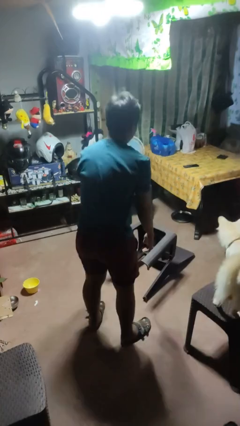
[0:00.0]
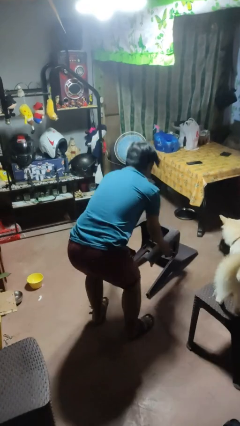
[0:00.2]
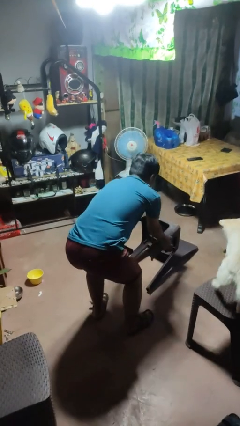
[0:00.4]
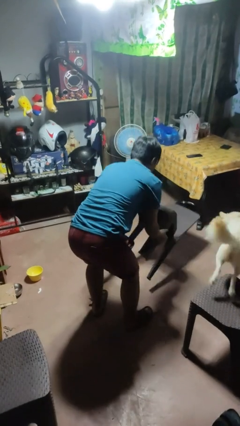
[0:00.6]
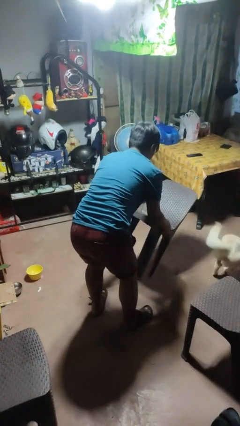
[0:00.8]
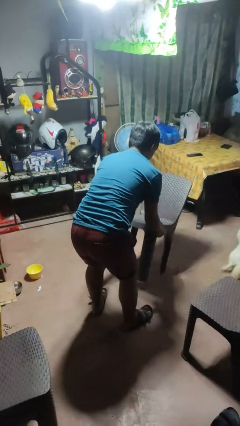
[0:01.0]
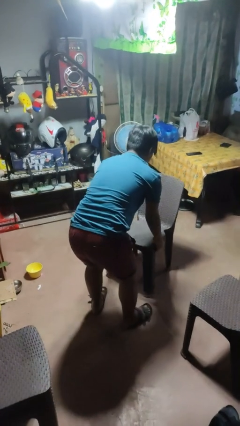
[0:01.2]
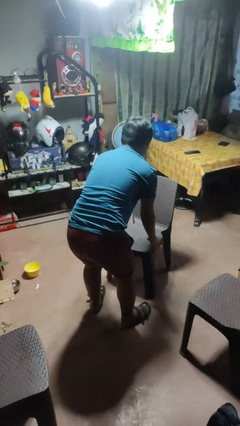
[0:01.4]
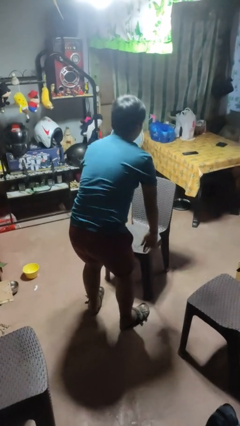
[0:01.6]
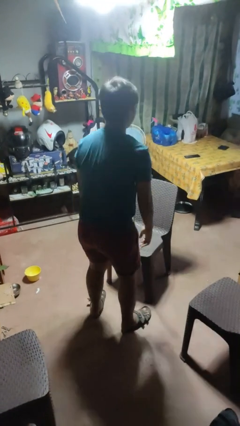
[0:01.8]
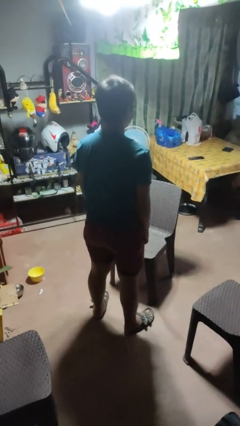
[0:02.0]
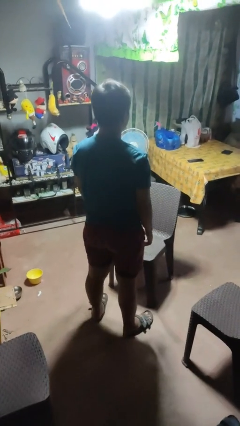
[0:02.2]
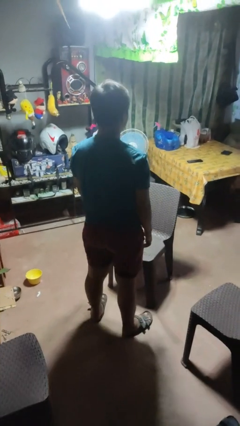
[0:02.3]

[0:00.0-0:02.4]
person sets upright furniture

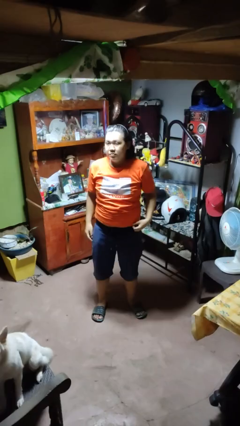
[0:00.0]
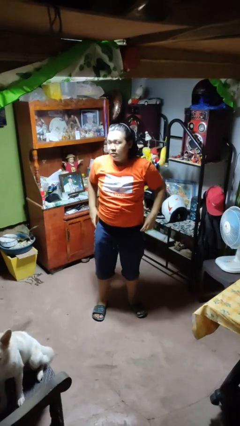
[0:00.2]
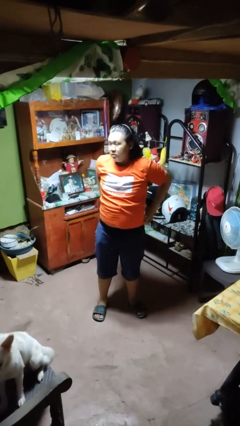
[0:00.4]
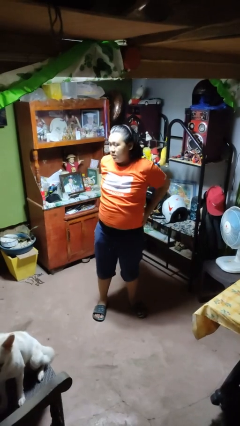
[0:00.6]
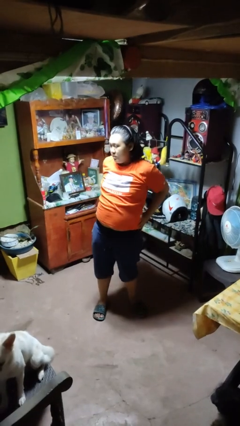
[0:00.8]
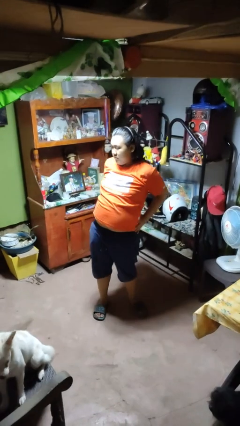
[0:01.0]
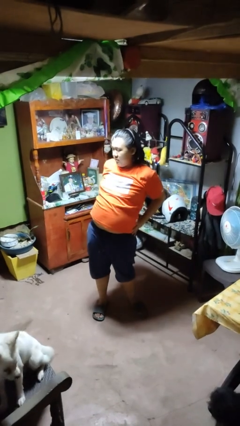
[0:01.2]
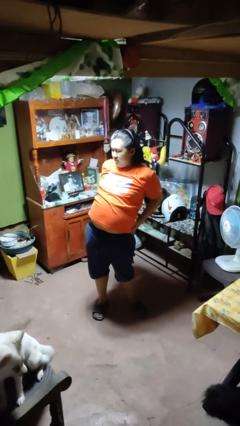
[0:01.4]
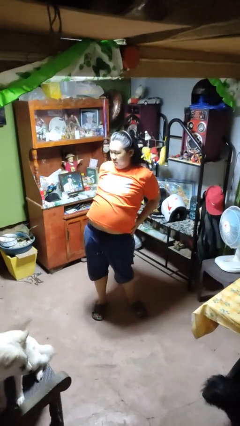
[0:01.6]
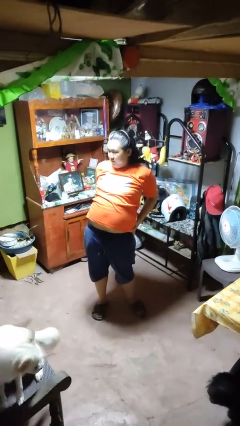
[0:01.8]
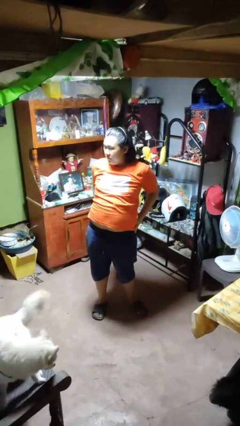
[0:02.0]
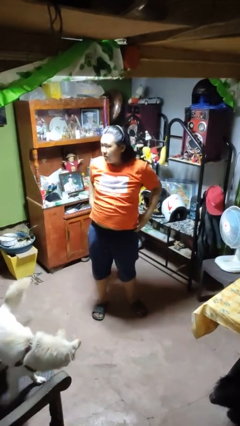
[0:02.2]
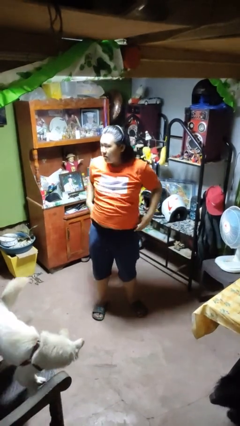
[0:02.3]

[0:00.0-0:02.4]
person stretches back

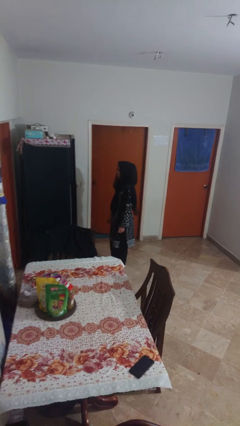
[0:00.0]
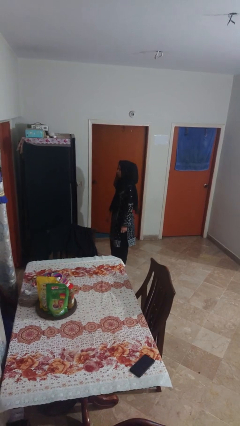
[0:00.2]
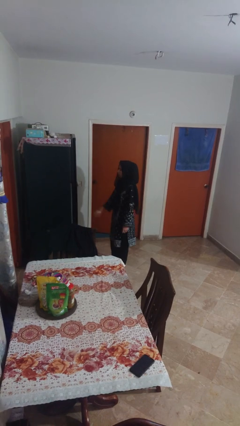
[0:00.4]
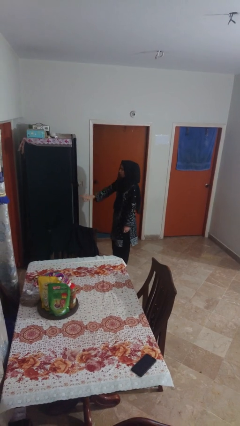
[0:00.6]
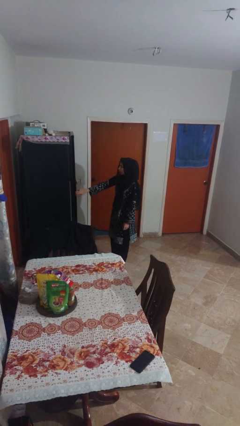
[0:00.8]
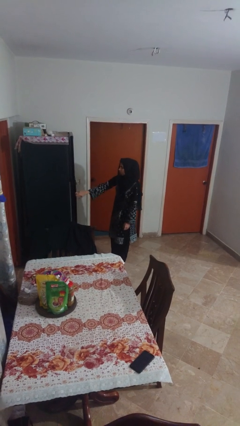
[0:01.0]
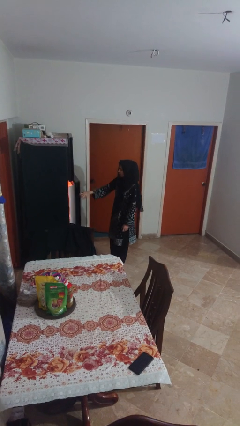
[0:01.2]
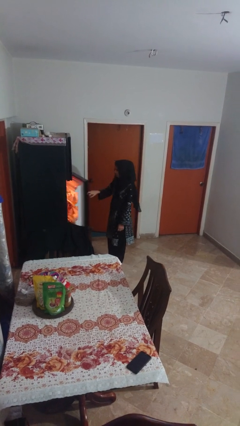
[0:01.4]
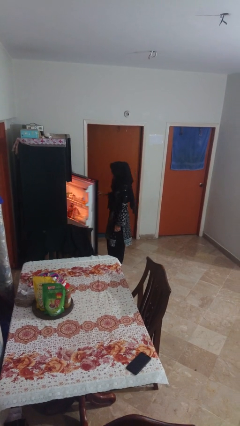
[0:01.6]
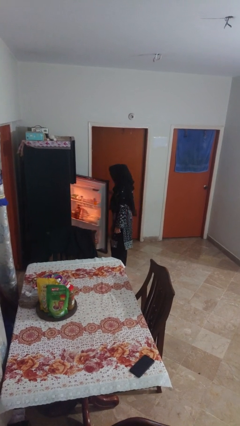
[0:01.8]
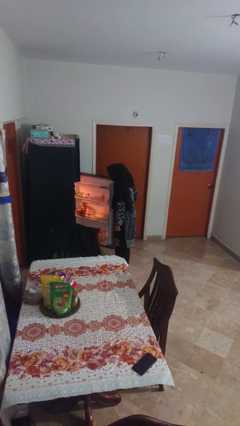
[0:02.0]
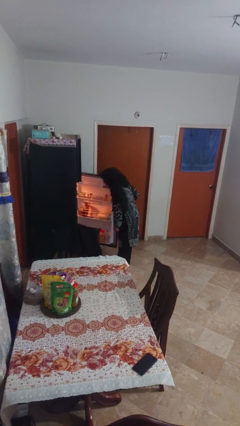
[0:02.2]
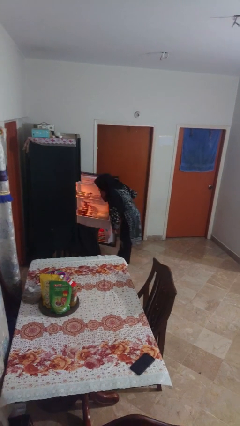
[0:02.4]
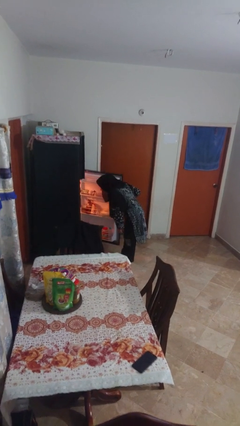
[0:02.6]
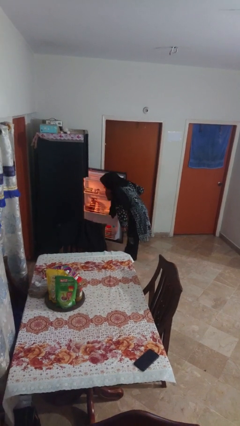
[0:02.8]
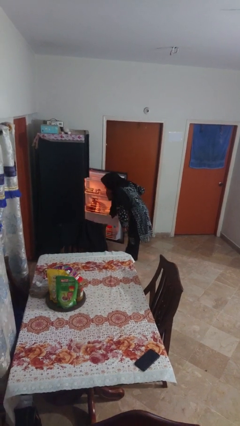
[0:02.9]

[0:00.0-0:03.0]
person opens refrigerator

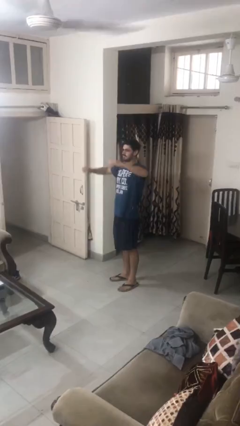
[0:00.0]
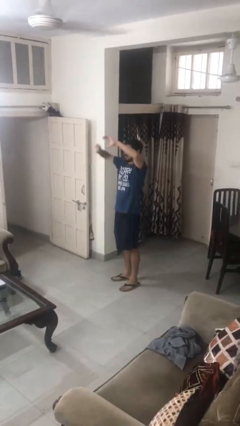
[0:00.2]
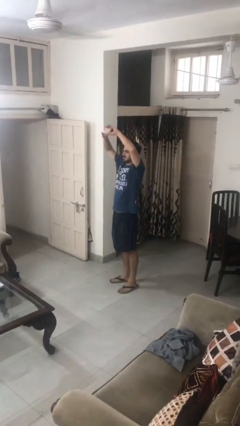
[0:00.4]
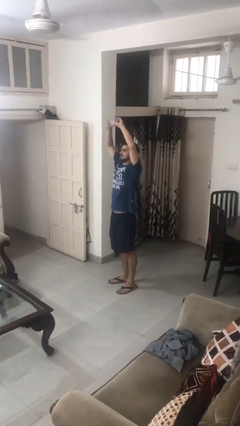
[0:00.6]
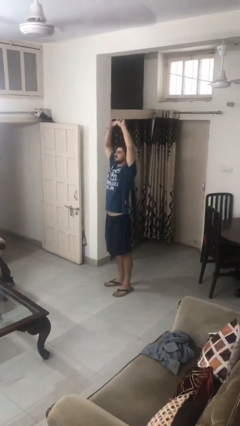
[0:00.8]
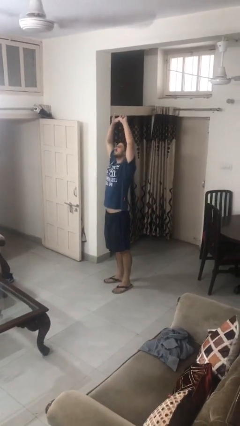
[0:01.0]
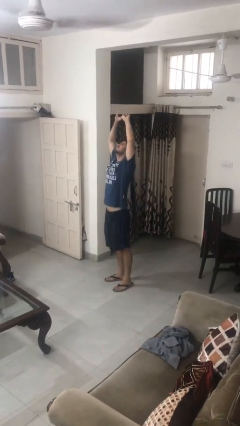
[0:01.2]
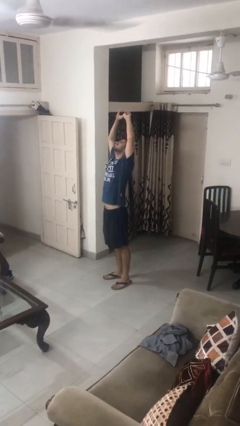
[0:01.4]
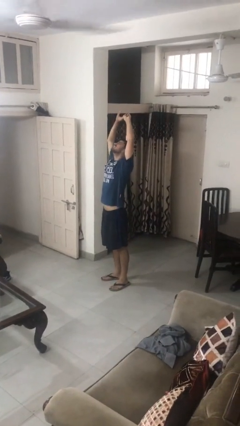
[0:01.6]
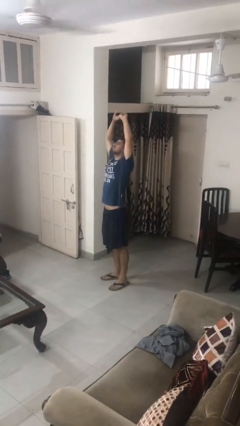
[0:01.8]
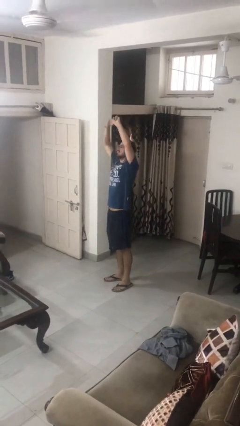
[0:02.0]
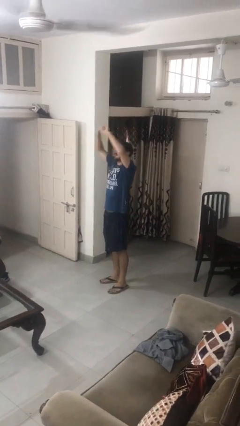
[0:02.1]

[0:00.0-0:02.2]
person stretches arms over head

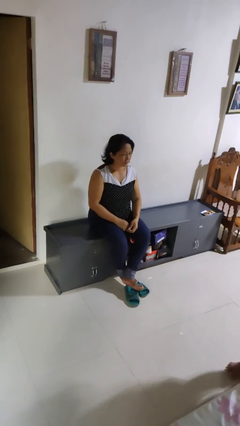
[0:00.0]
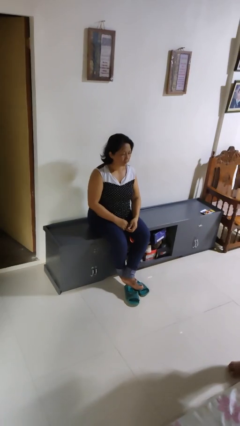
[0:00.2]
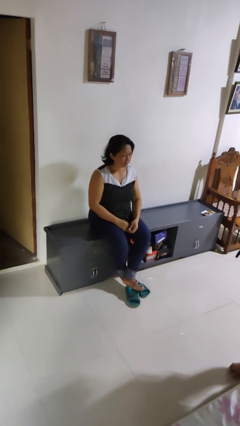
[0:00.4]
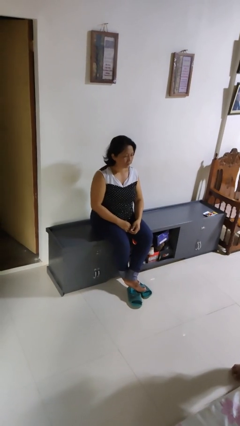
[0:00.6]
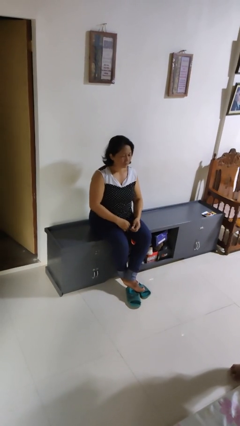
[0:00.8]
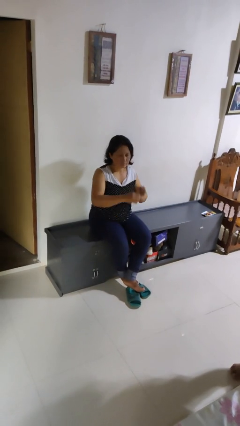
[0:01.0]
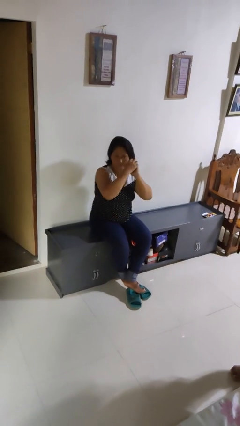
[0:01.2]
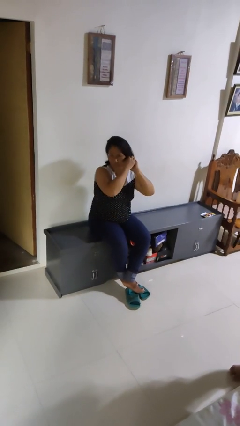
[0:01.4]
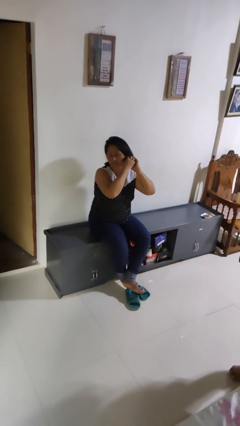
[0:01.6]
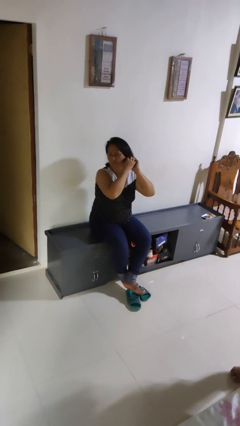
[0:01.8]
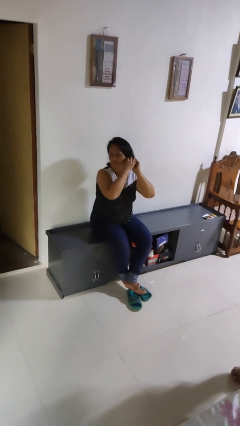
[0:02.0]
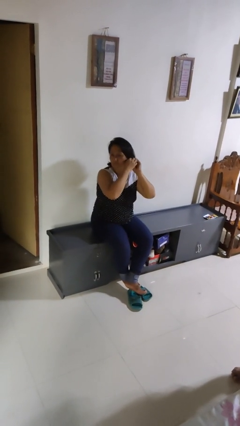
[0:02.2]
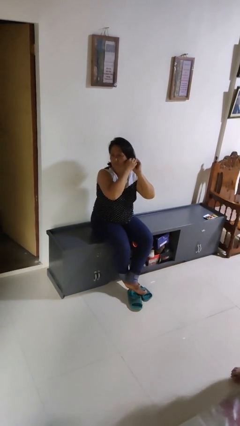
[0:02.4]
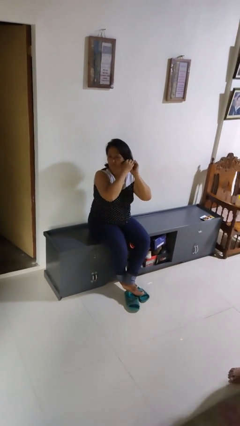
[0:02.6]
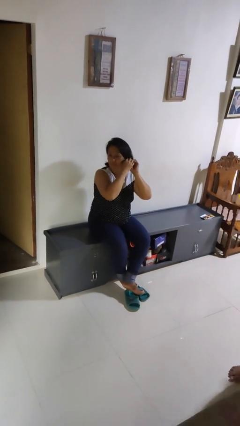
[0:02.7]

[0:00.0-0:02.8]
person puts on earrings

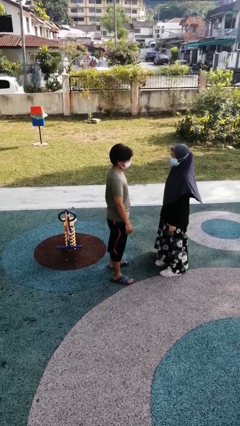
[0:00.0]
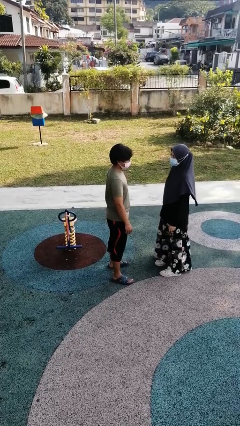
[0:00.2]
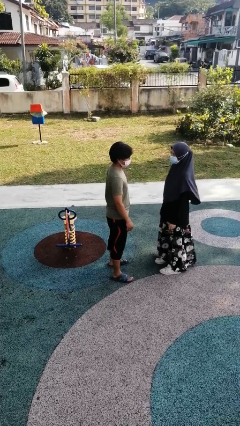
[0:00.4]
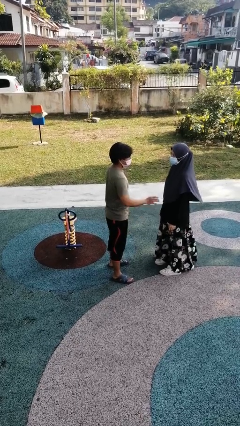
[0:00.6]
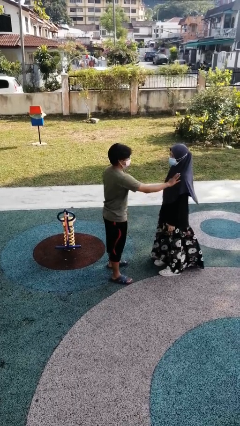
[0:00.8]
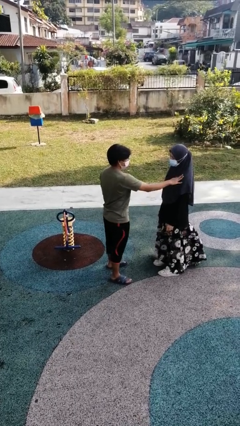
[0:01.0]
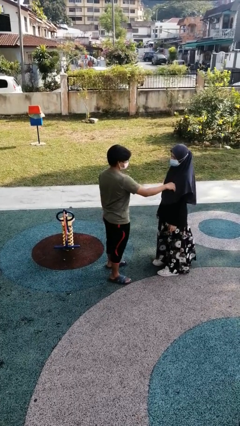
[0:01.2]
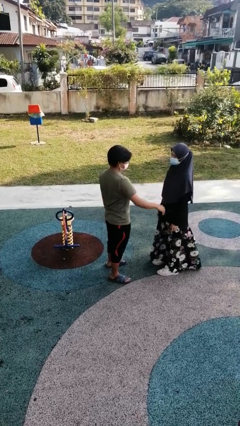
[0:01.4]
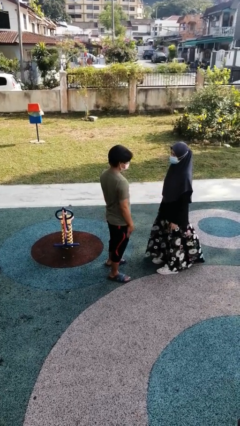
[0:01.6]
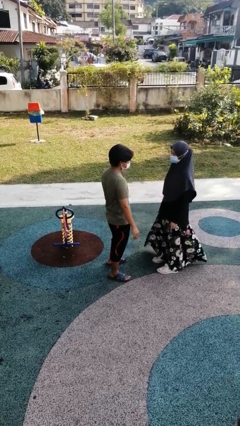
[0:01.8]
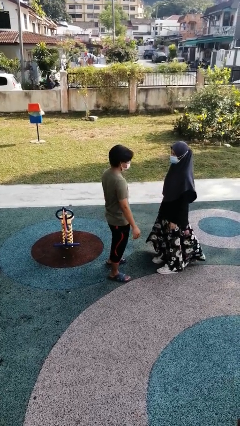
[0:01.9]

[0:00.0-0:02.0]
person shoves person

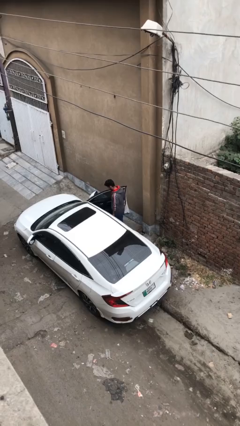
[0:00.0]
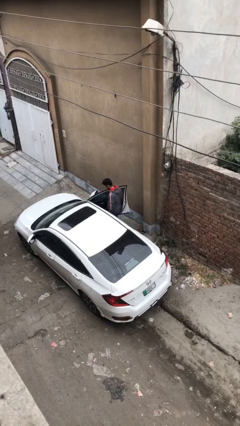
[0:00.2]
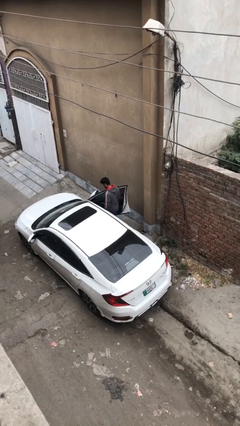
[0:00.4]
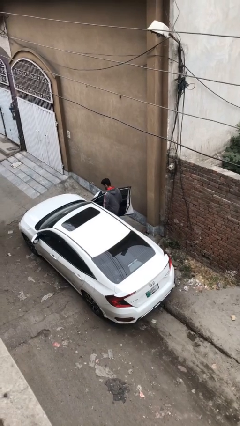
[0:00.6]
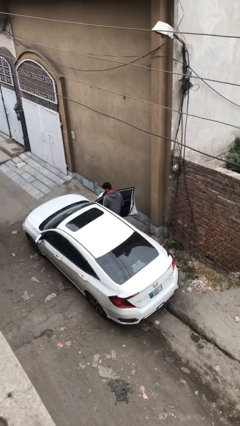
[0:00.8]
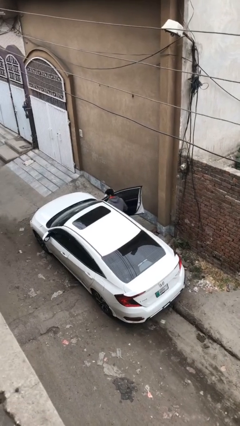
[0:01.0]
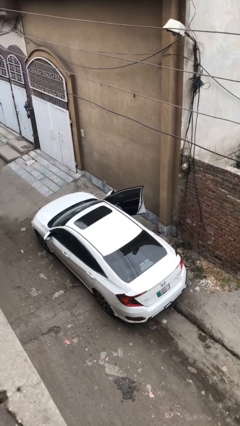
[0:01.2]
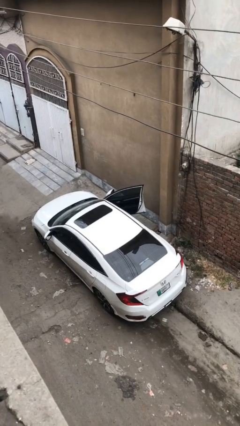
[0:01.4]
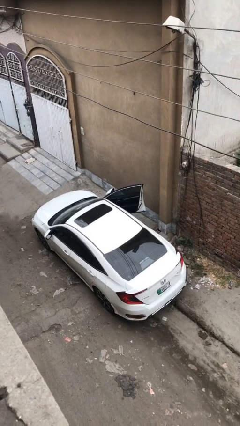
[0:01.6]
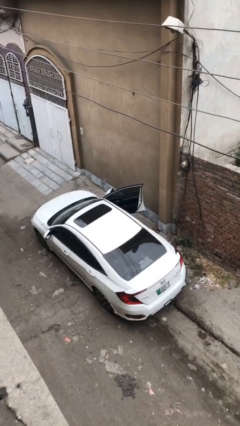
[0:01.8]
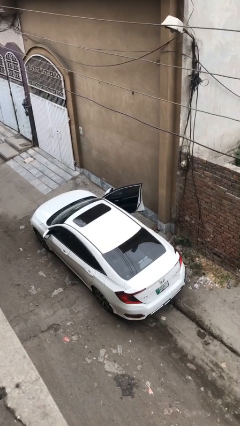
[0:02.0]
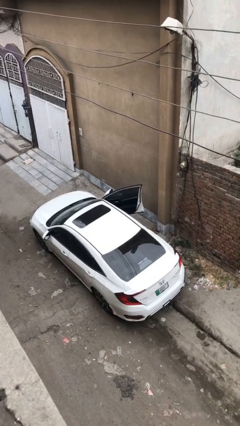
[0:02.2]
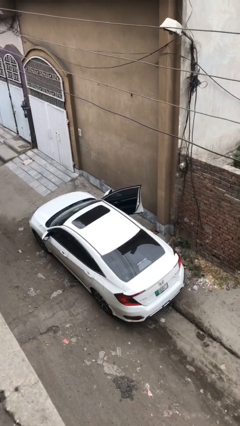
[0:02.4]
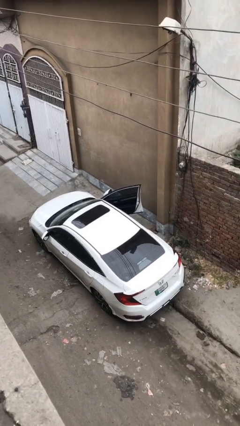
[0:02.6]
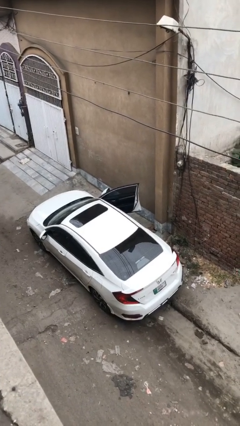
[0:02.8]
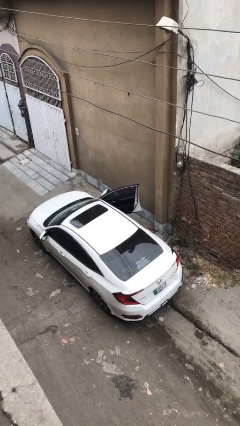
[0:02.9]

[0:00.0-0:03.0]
person enters car
